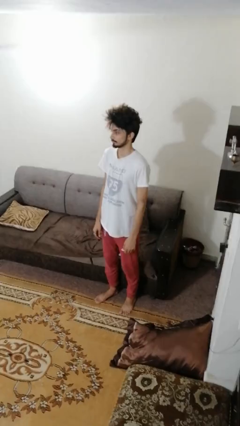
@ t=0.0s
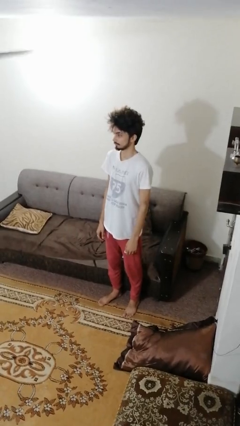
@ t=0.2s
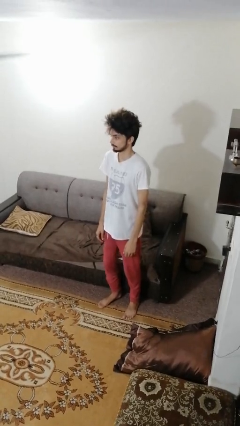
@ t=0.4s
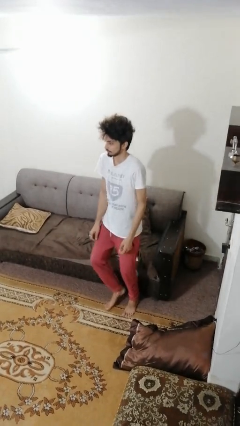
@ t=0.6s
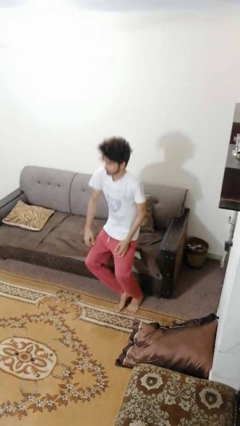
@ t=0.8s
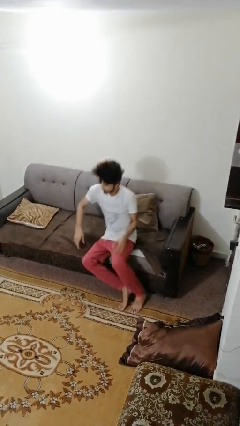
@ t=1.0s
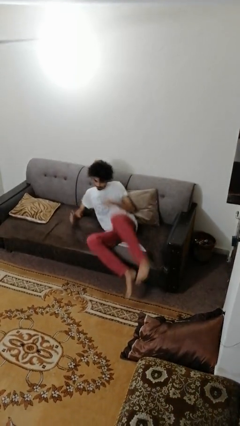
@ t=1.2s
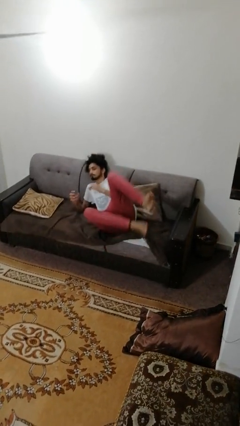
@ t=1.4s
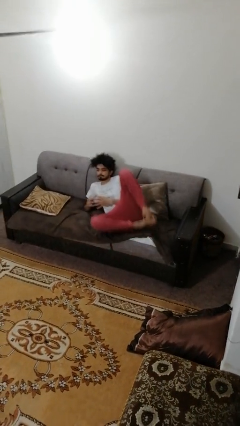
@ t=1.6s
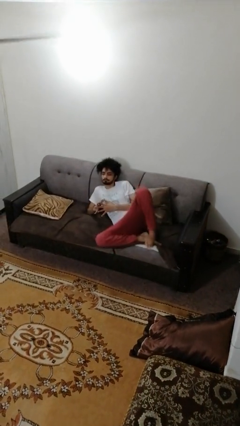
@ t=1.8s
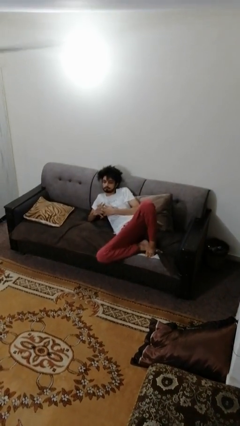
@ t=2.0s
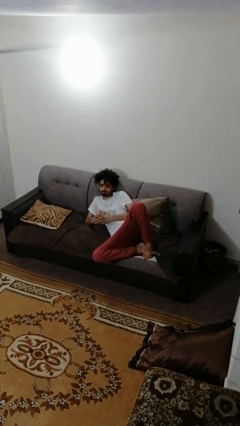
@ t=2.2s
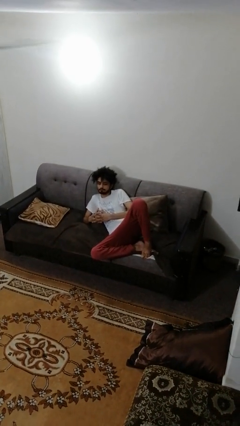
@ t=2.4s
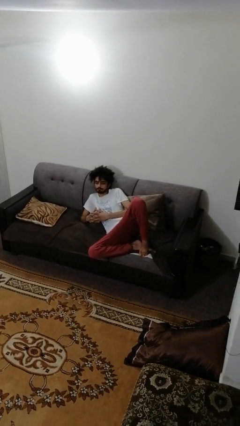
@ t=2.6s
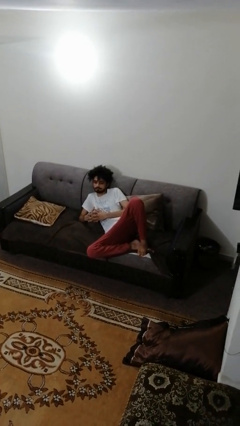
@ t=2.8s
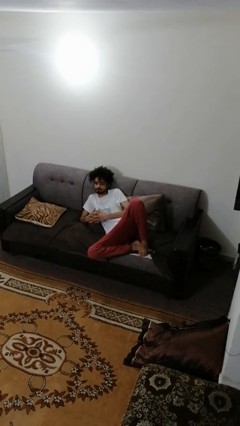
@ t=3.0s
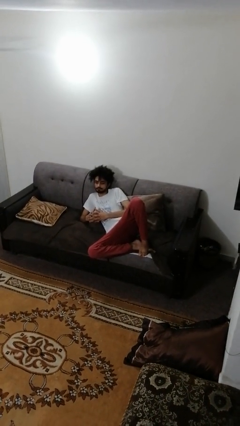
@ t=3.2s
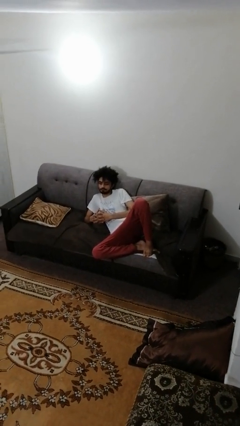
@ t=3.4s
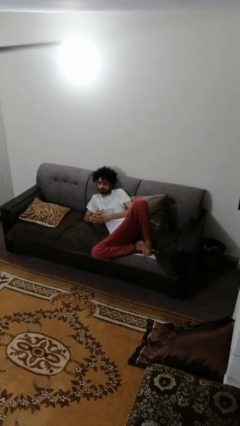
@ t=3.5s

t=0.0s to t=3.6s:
person lies down on couch

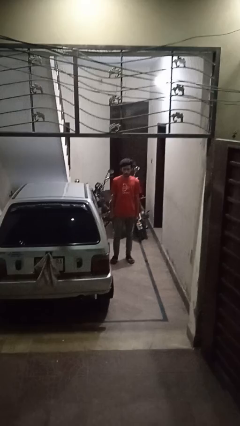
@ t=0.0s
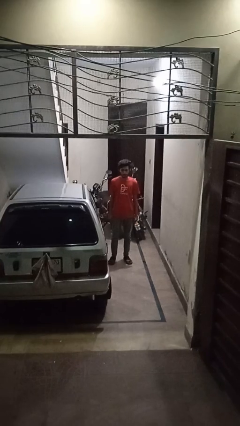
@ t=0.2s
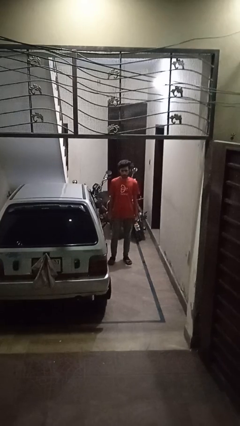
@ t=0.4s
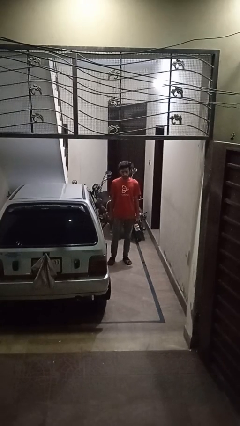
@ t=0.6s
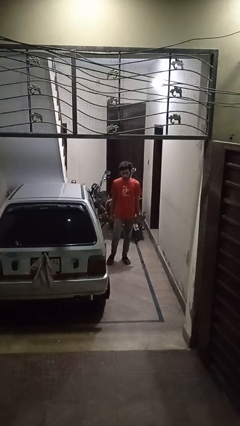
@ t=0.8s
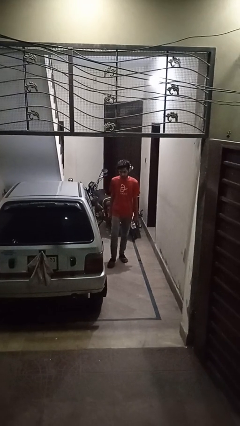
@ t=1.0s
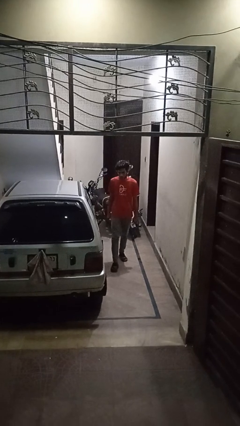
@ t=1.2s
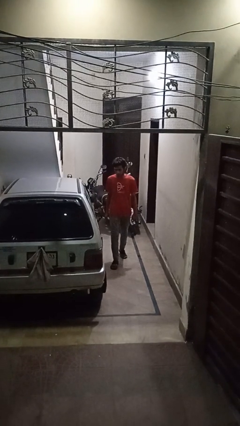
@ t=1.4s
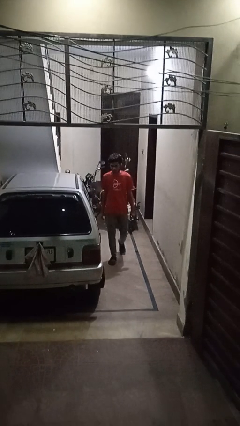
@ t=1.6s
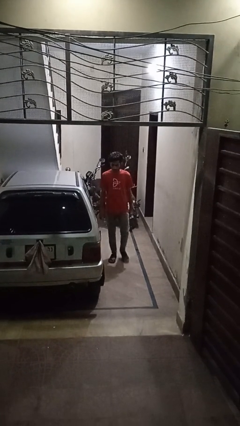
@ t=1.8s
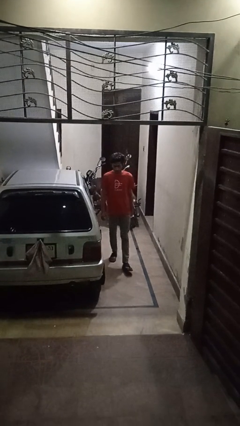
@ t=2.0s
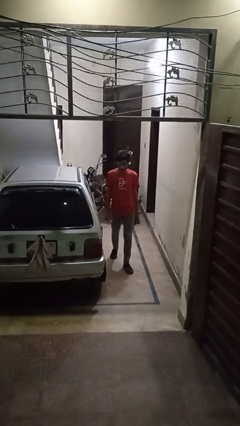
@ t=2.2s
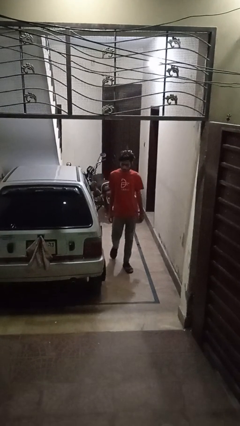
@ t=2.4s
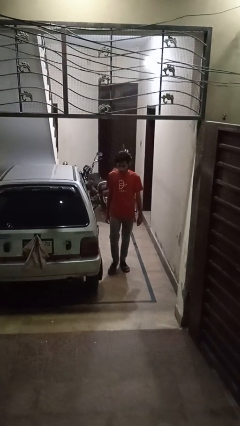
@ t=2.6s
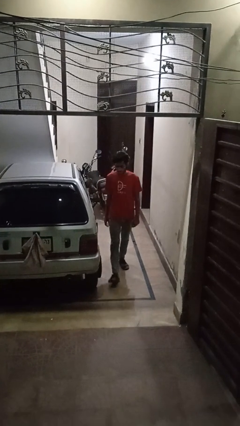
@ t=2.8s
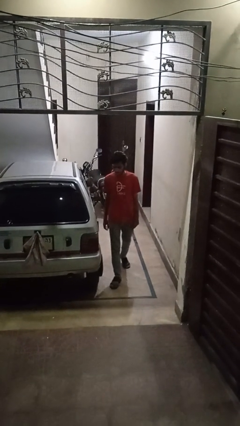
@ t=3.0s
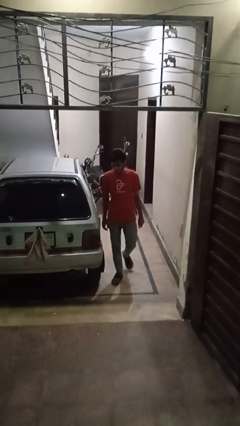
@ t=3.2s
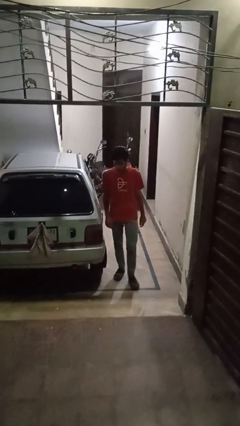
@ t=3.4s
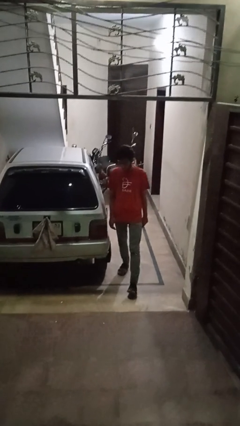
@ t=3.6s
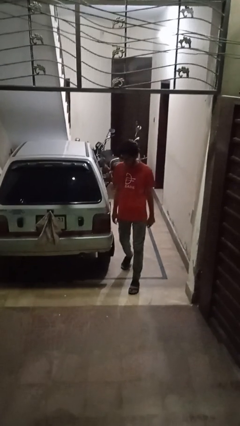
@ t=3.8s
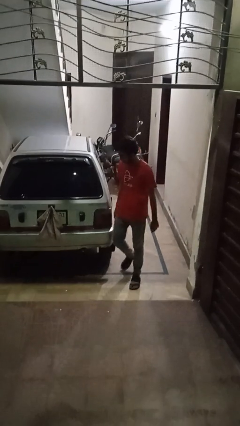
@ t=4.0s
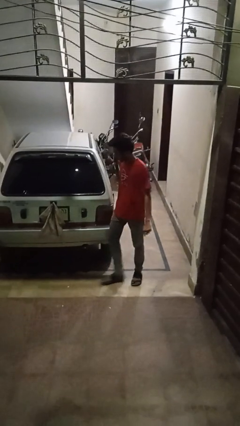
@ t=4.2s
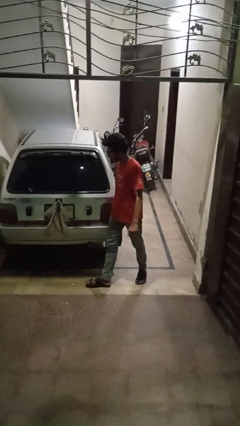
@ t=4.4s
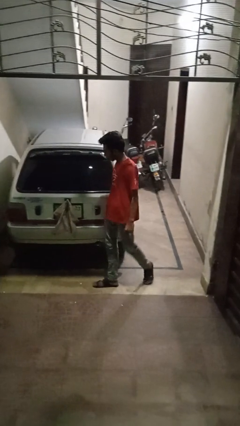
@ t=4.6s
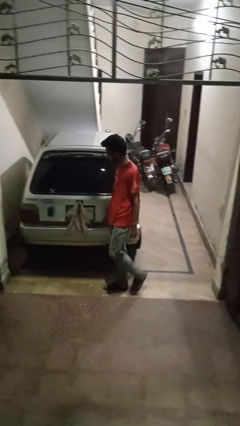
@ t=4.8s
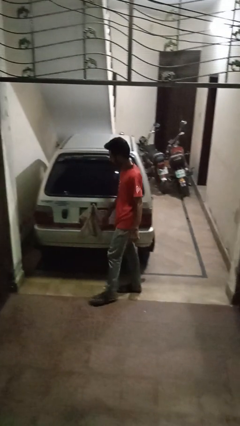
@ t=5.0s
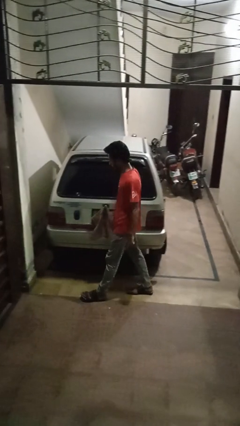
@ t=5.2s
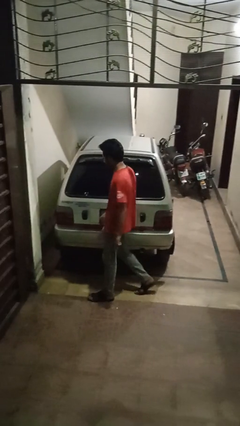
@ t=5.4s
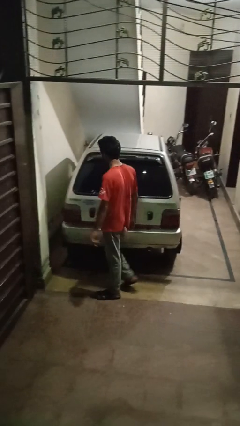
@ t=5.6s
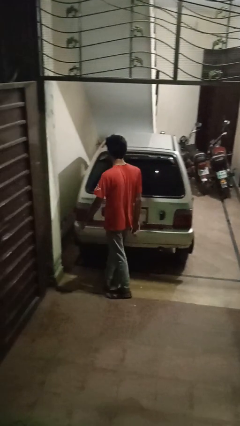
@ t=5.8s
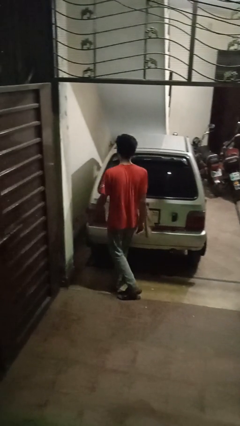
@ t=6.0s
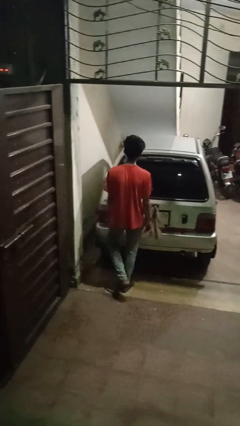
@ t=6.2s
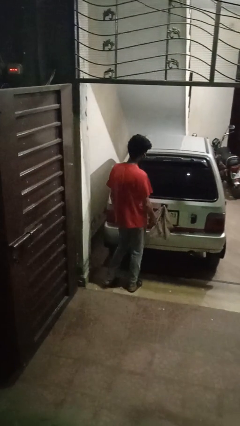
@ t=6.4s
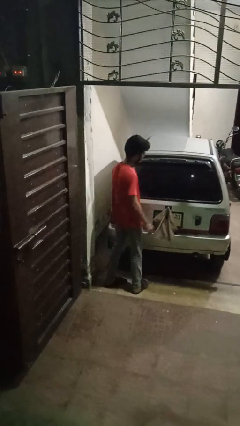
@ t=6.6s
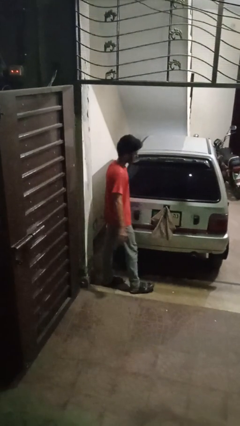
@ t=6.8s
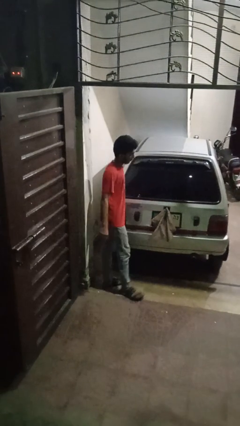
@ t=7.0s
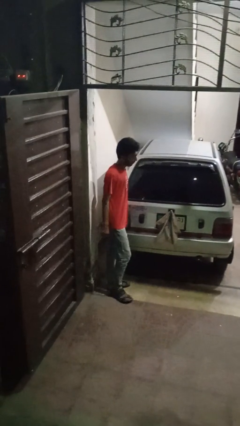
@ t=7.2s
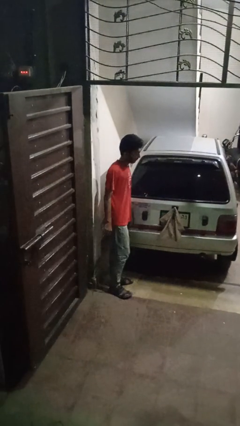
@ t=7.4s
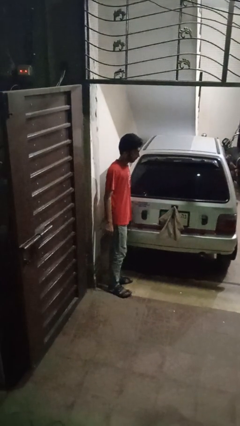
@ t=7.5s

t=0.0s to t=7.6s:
person walks around car

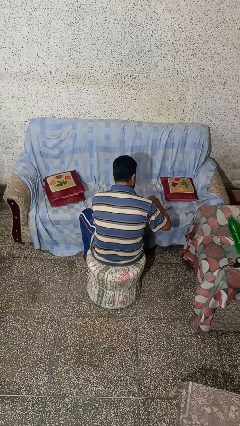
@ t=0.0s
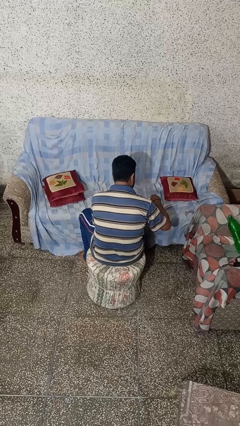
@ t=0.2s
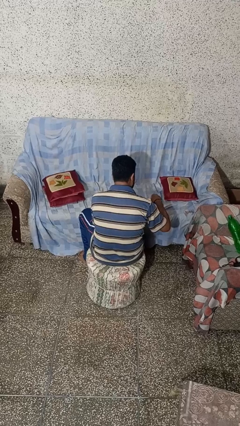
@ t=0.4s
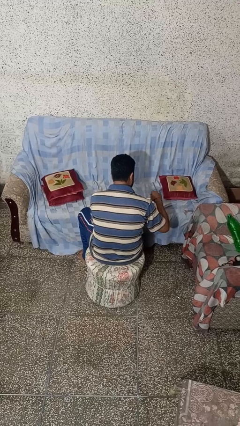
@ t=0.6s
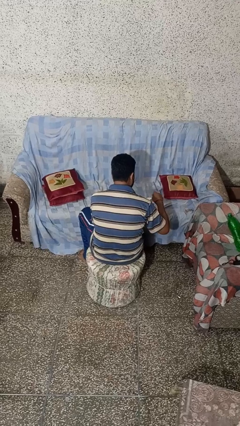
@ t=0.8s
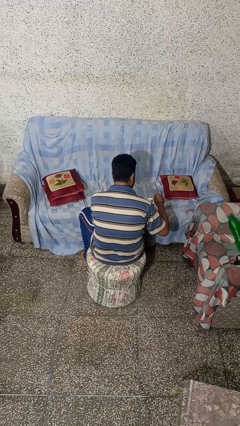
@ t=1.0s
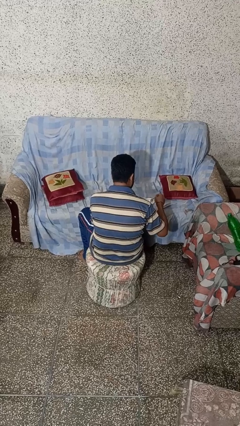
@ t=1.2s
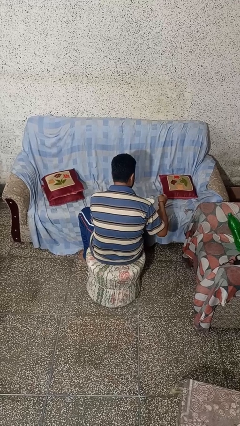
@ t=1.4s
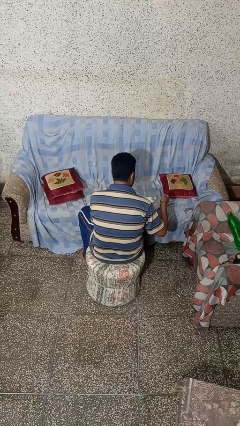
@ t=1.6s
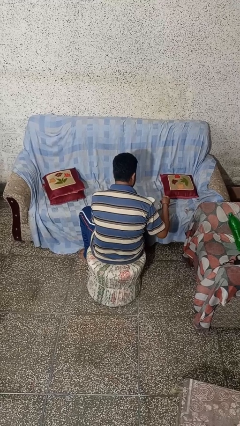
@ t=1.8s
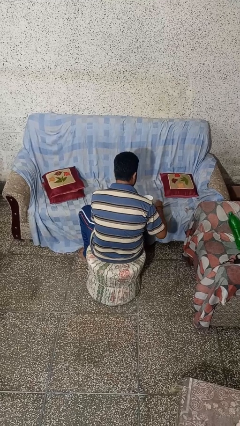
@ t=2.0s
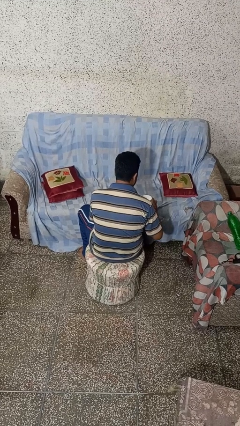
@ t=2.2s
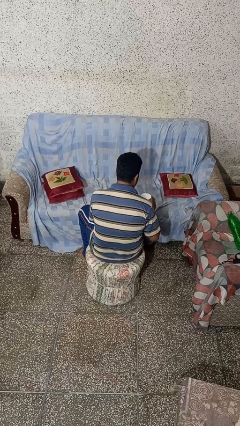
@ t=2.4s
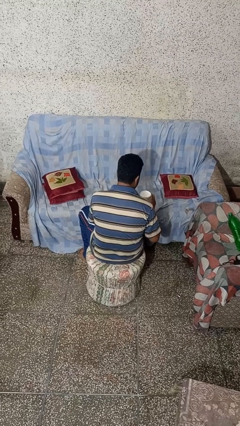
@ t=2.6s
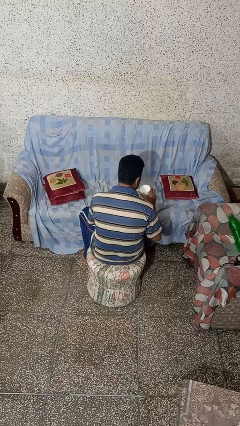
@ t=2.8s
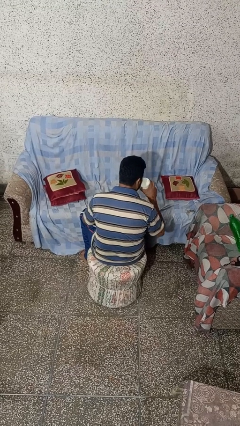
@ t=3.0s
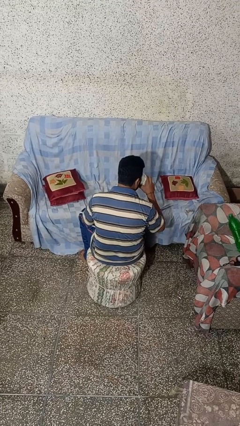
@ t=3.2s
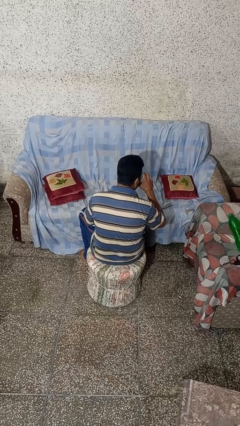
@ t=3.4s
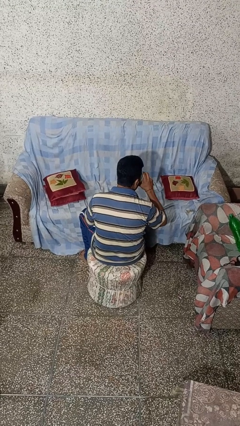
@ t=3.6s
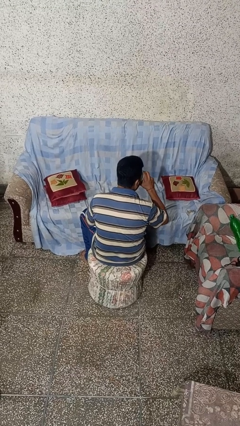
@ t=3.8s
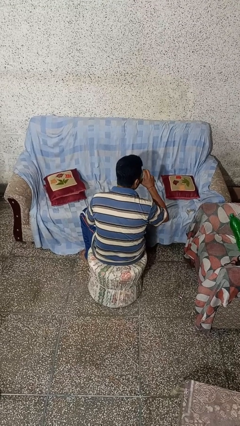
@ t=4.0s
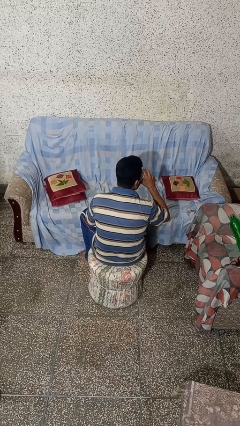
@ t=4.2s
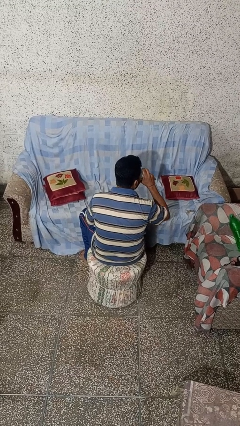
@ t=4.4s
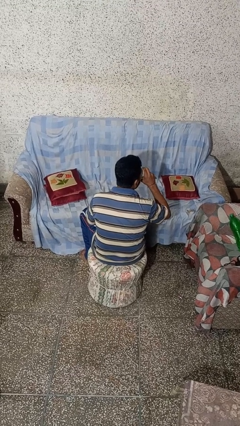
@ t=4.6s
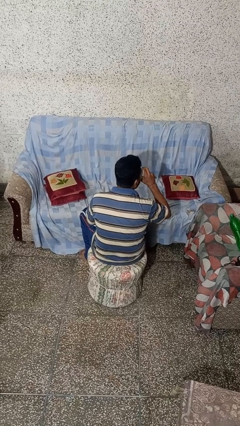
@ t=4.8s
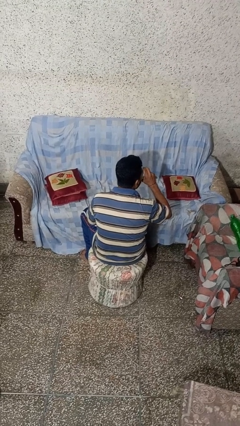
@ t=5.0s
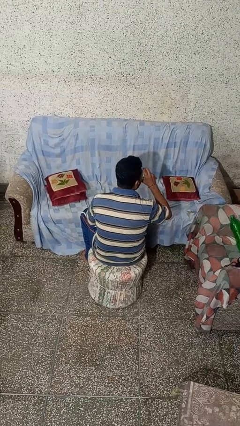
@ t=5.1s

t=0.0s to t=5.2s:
person drinks from mug

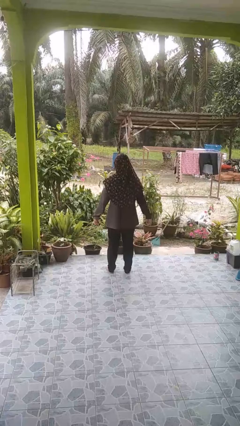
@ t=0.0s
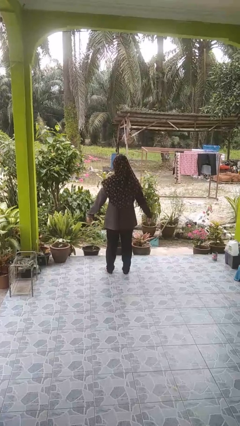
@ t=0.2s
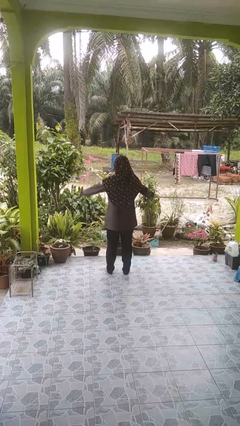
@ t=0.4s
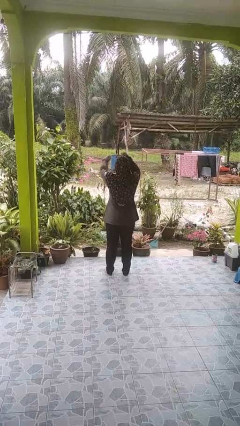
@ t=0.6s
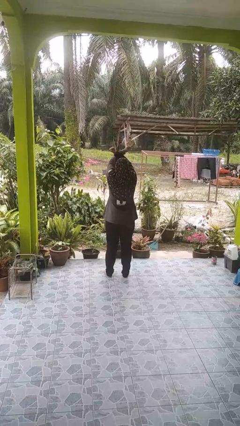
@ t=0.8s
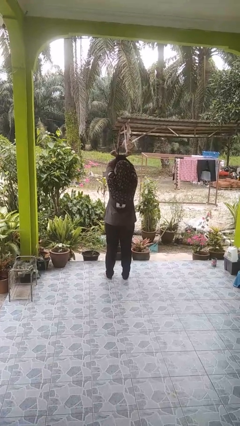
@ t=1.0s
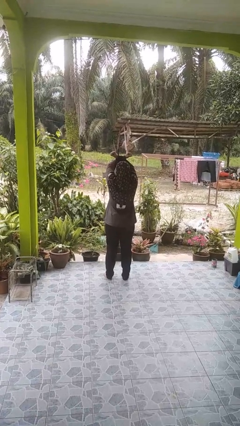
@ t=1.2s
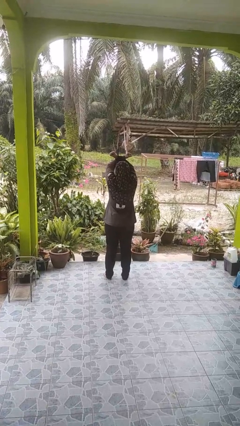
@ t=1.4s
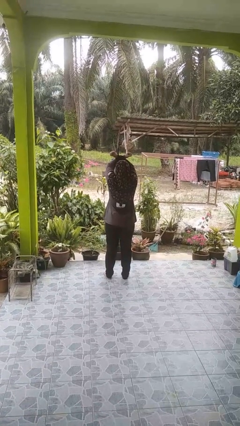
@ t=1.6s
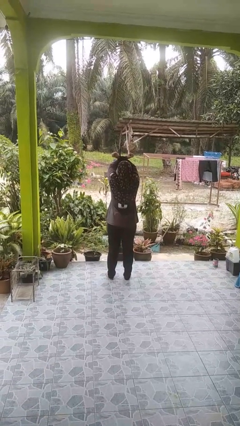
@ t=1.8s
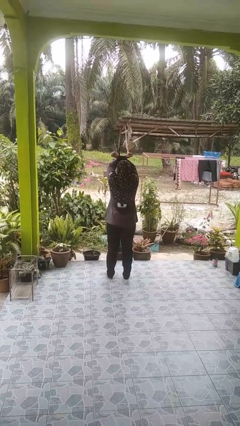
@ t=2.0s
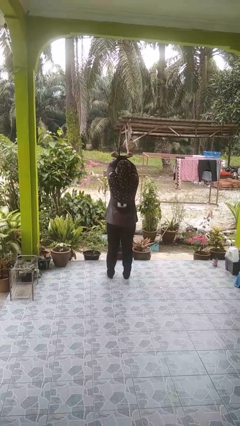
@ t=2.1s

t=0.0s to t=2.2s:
person crosses arms
